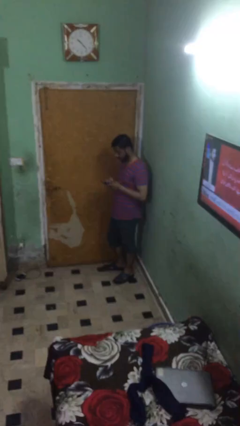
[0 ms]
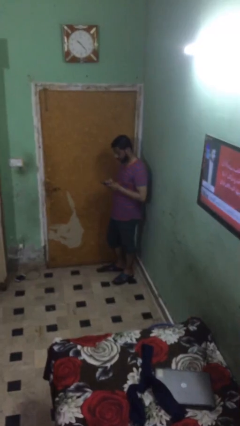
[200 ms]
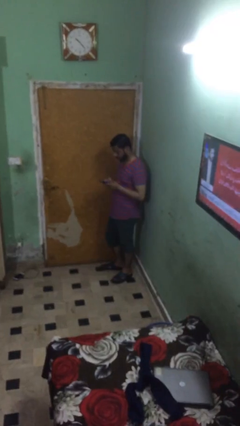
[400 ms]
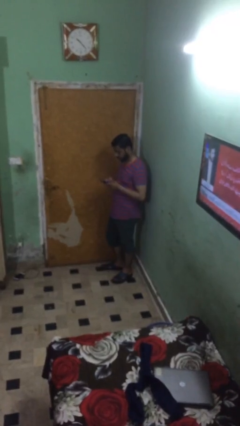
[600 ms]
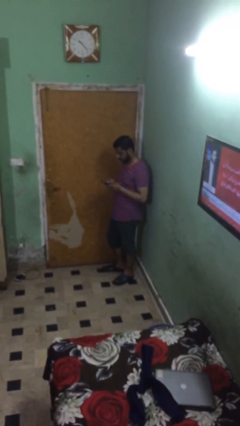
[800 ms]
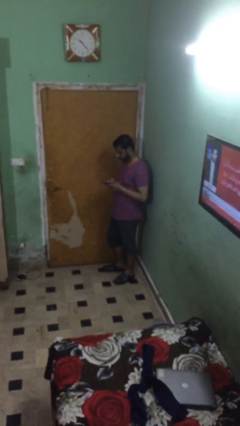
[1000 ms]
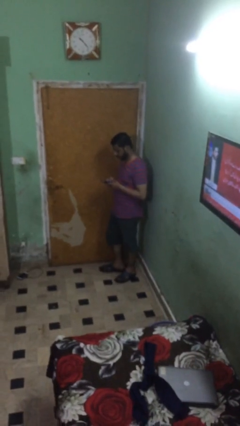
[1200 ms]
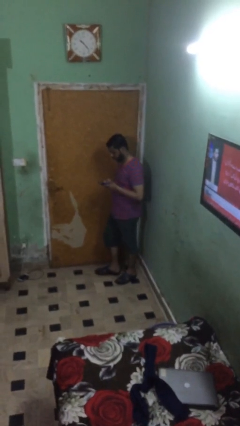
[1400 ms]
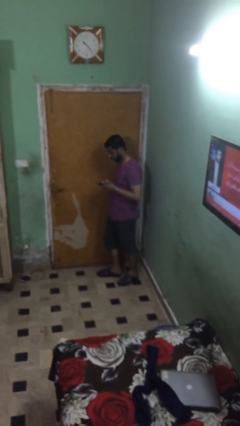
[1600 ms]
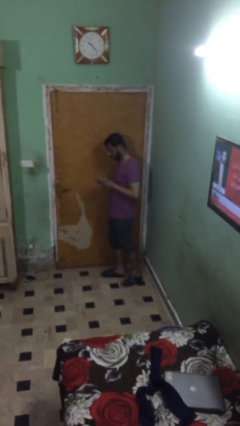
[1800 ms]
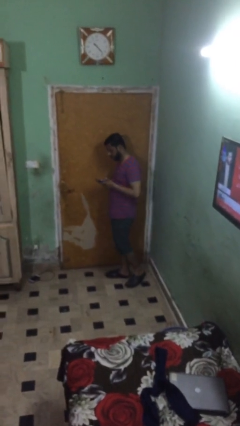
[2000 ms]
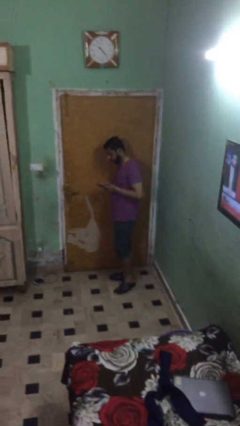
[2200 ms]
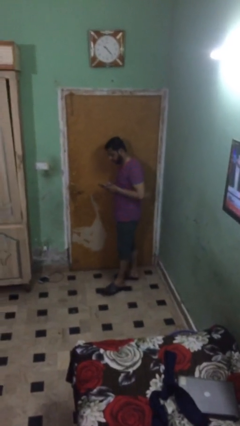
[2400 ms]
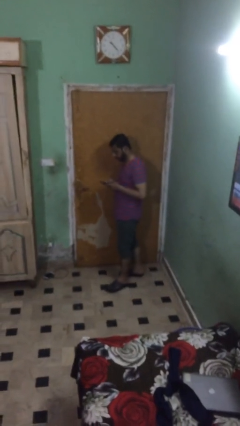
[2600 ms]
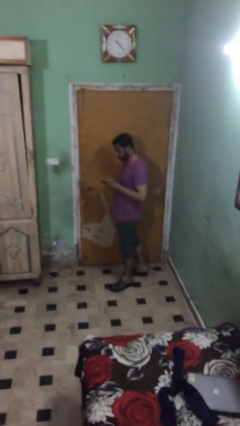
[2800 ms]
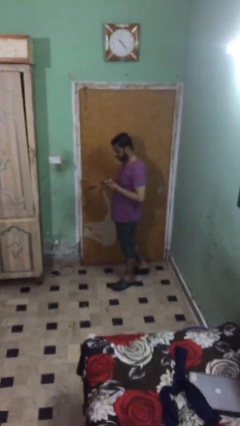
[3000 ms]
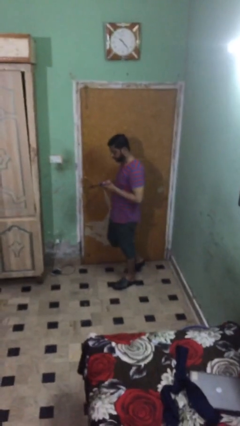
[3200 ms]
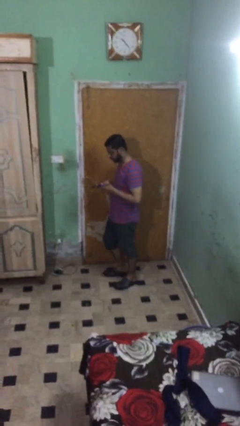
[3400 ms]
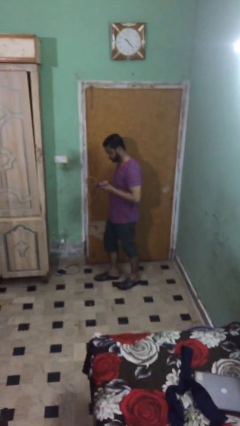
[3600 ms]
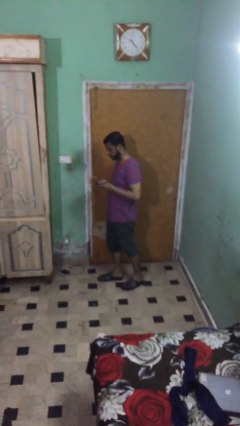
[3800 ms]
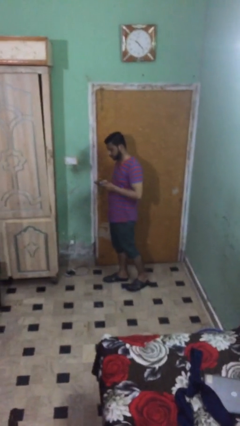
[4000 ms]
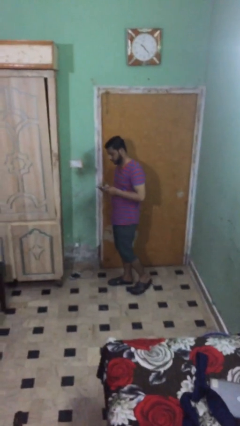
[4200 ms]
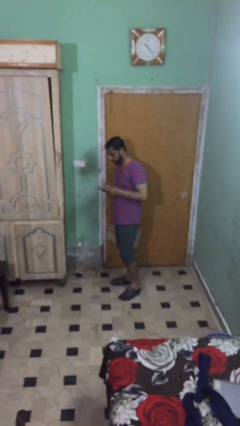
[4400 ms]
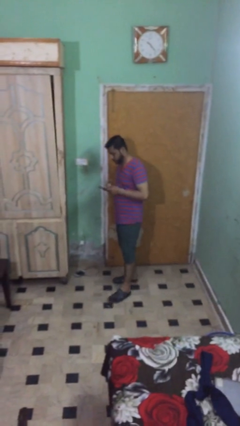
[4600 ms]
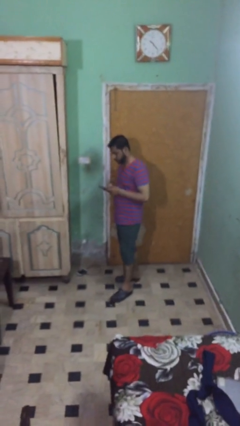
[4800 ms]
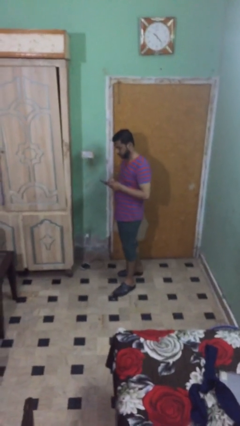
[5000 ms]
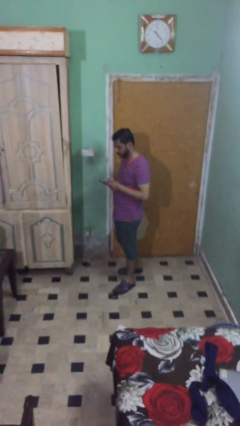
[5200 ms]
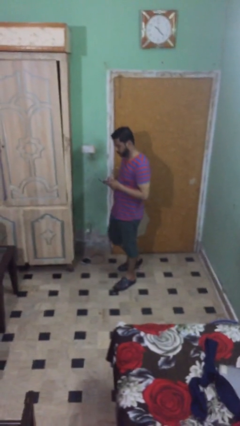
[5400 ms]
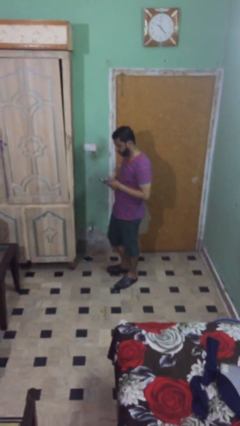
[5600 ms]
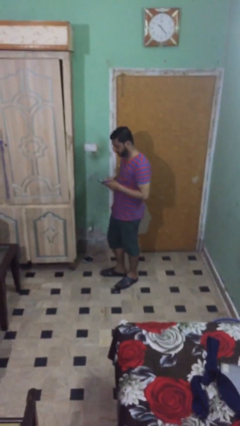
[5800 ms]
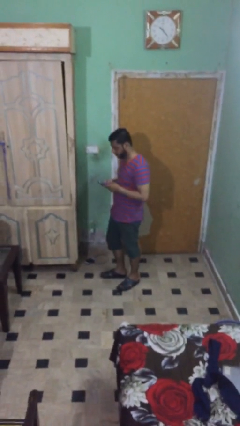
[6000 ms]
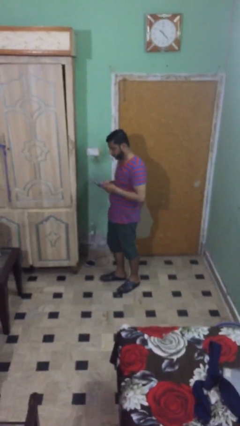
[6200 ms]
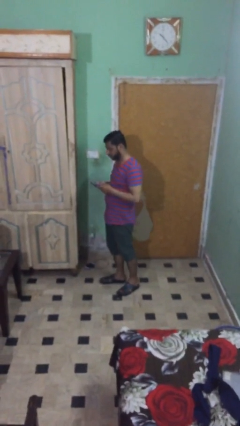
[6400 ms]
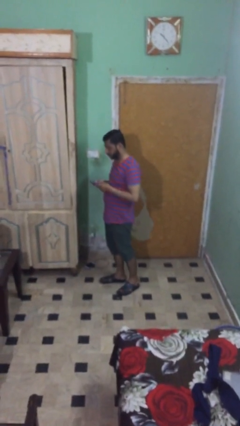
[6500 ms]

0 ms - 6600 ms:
person texts on phone

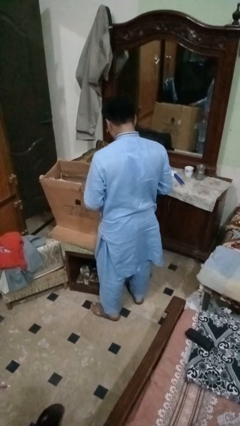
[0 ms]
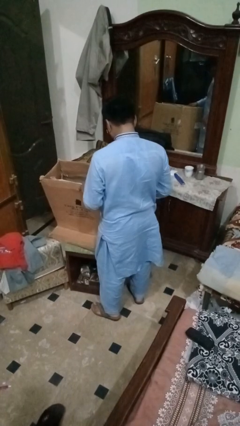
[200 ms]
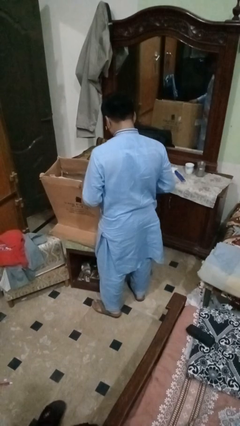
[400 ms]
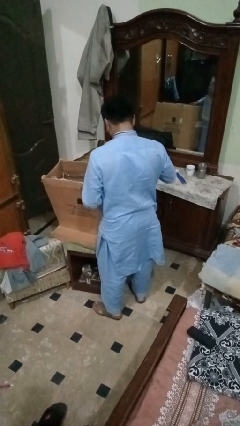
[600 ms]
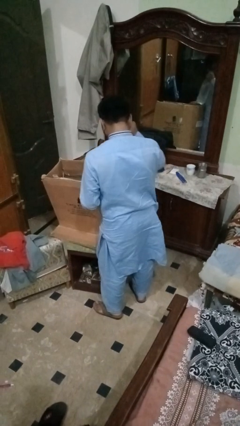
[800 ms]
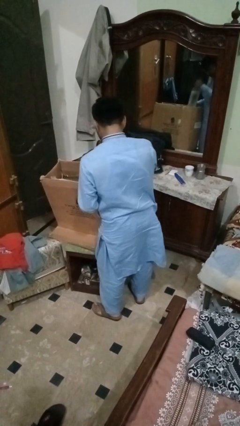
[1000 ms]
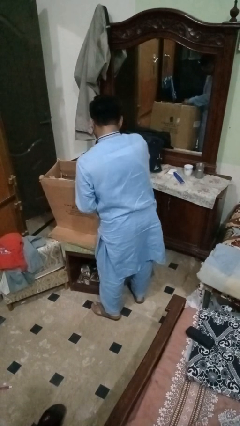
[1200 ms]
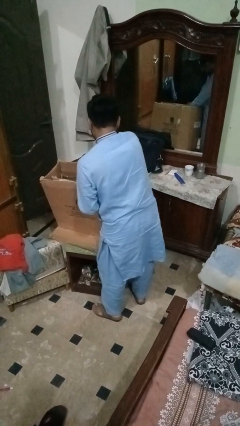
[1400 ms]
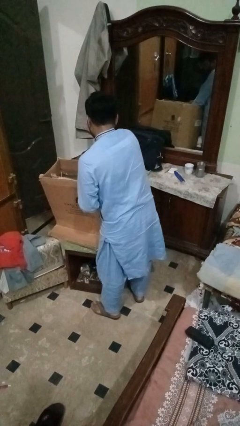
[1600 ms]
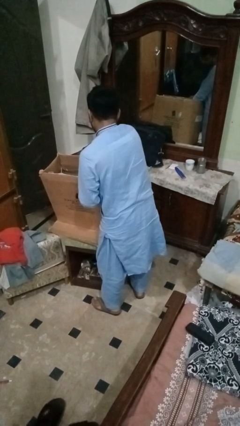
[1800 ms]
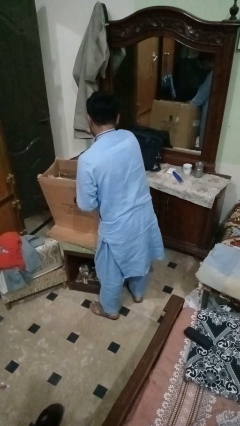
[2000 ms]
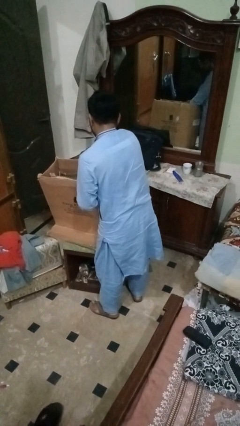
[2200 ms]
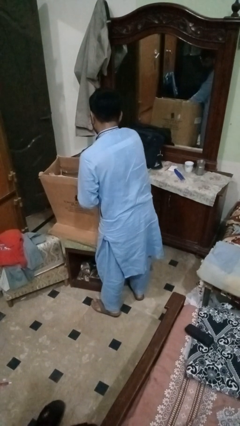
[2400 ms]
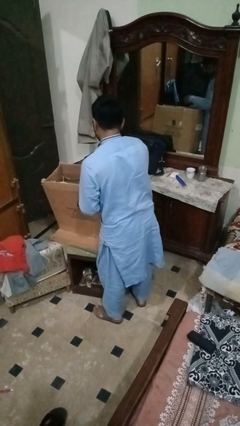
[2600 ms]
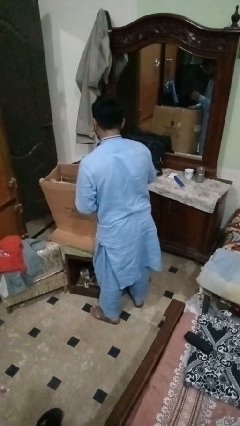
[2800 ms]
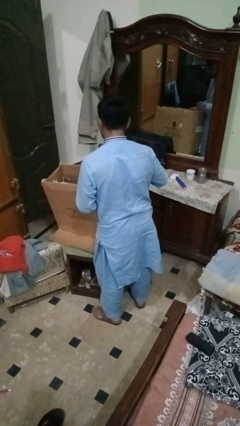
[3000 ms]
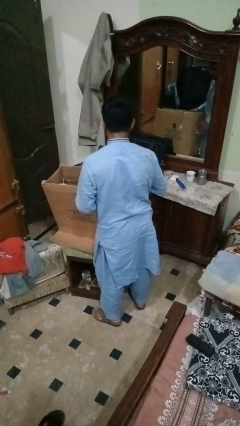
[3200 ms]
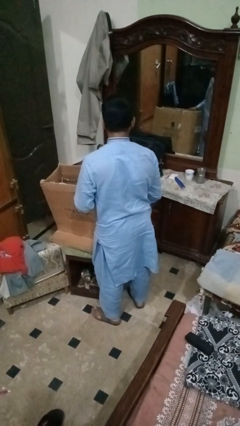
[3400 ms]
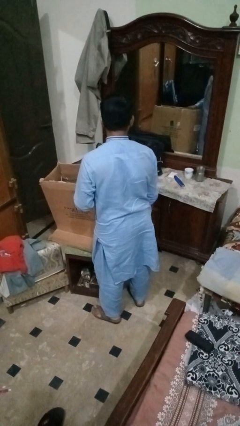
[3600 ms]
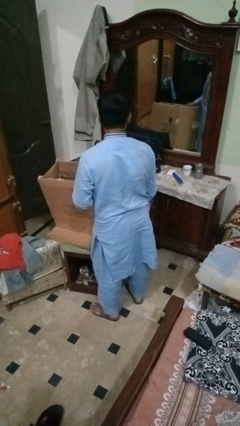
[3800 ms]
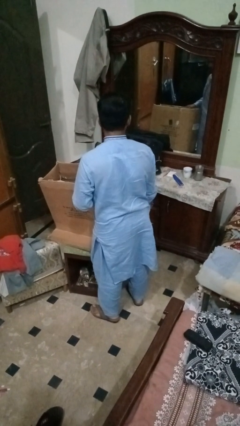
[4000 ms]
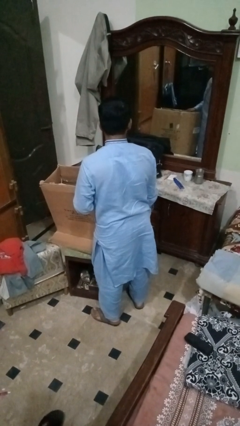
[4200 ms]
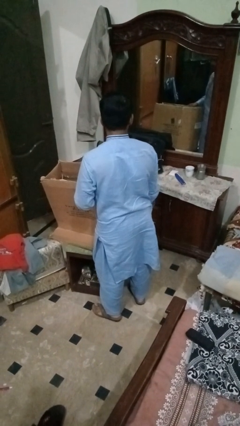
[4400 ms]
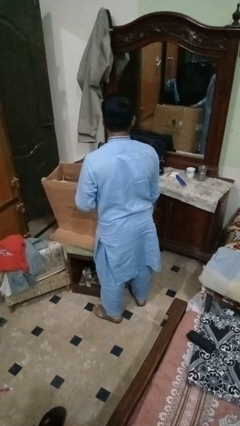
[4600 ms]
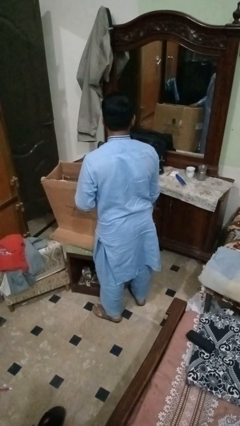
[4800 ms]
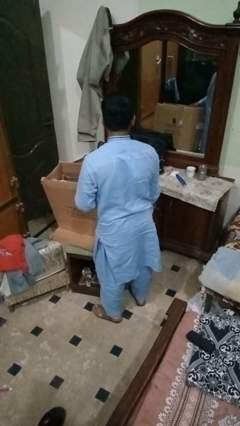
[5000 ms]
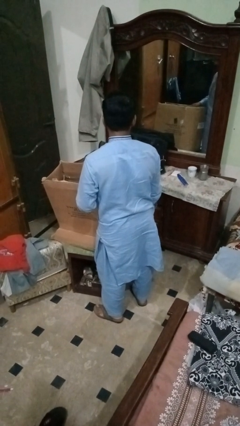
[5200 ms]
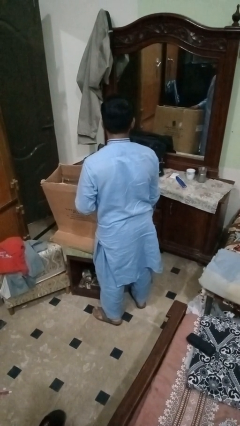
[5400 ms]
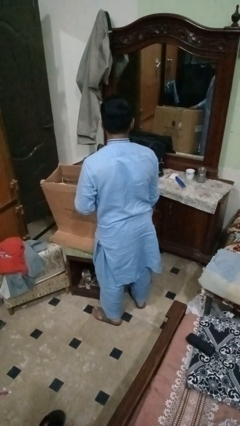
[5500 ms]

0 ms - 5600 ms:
person puts object into box

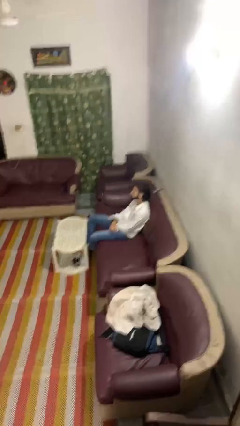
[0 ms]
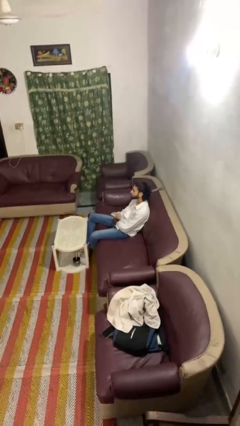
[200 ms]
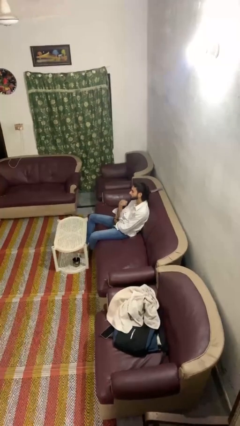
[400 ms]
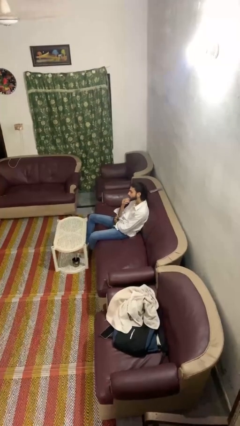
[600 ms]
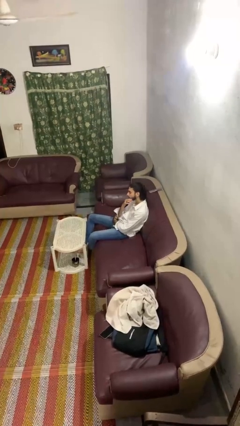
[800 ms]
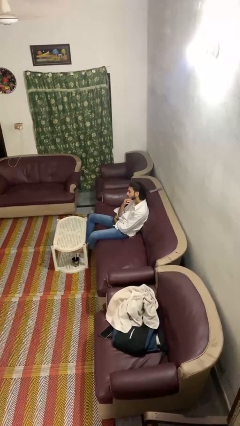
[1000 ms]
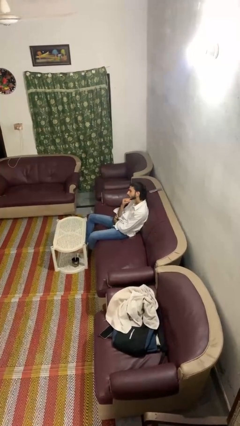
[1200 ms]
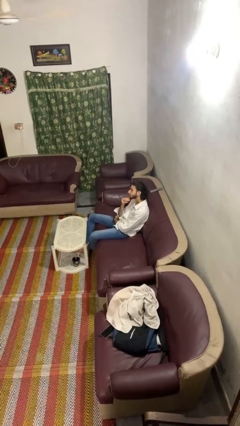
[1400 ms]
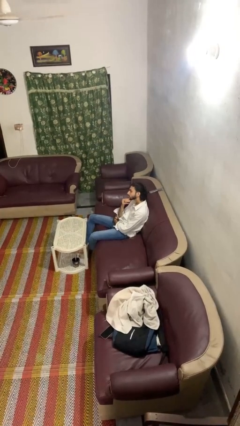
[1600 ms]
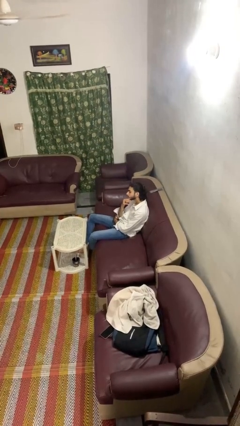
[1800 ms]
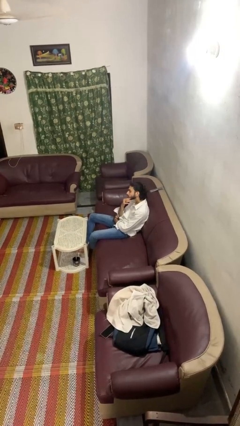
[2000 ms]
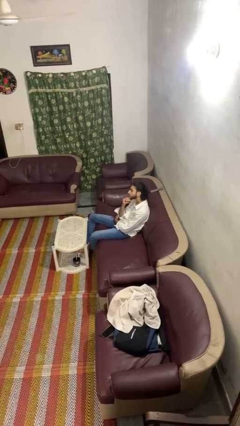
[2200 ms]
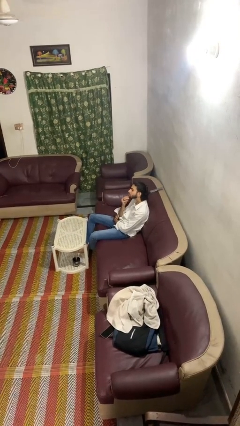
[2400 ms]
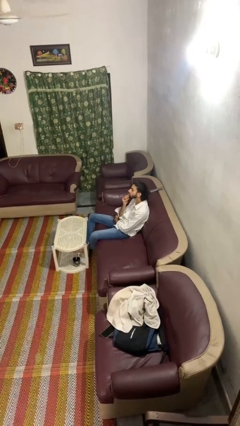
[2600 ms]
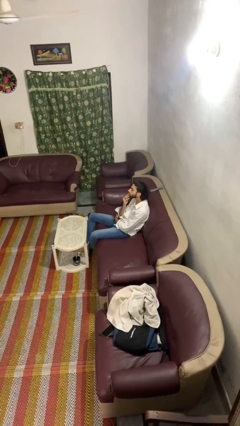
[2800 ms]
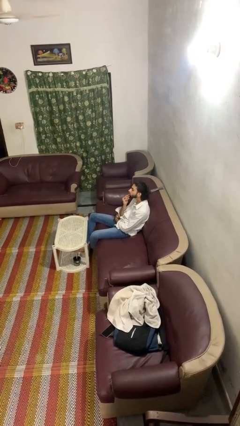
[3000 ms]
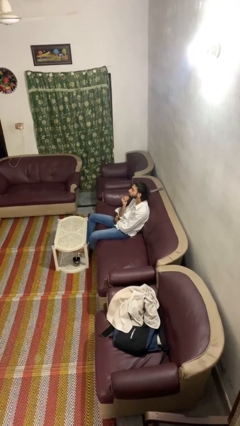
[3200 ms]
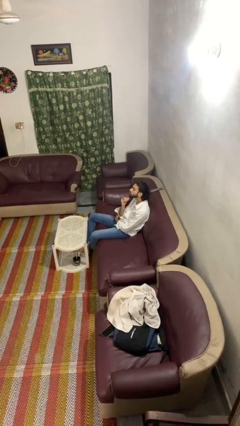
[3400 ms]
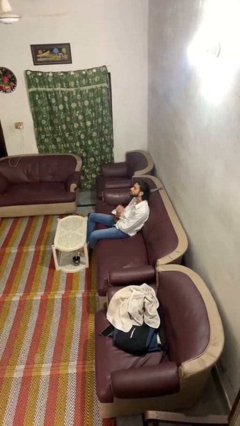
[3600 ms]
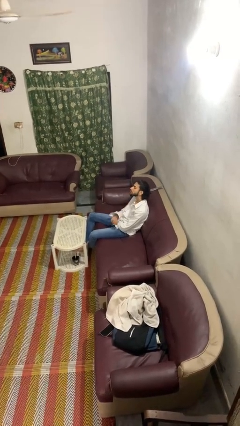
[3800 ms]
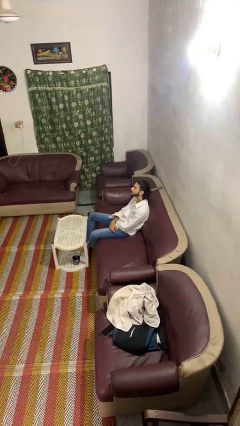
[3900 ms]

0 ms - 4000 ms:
person strokes chin

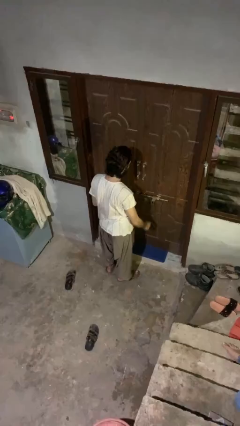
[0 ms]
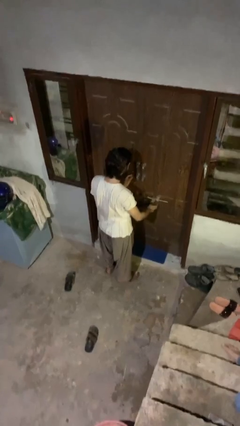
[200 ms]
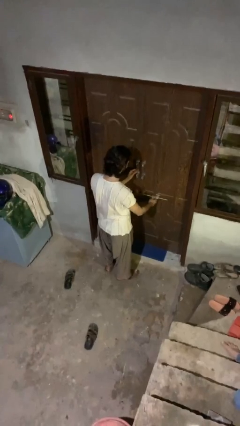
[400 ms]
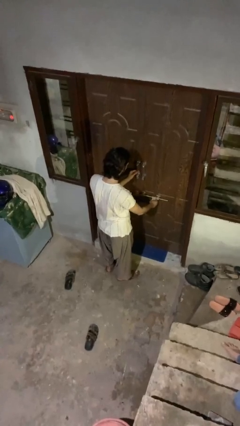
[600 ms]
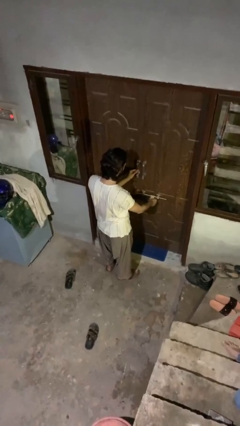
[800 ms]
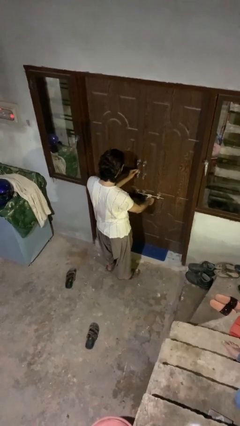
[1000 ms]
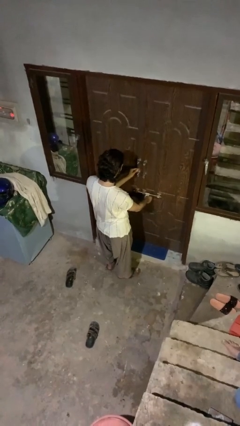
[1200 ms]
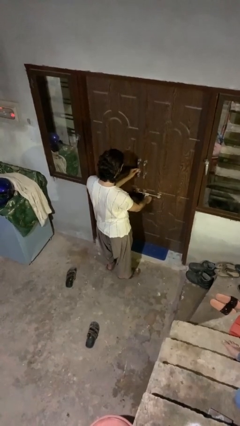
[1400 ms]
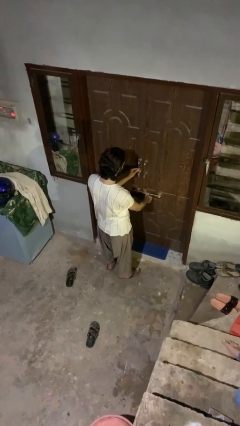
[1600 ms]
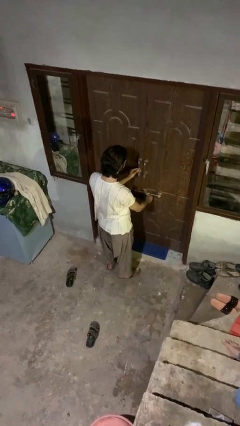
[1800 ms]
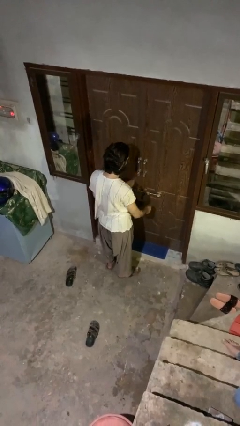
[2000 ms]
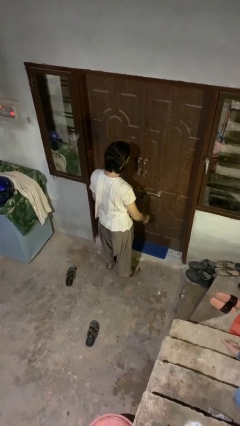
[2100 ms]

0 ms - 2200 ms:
person locks door with keys
